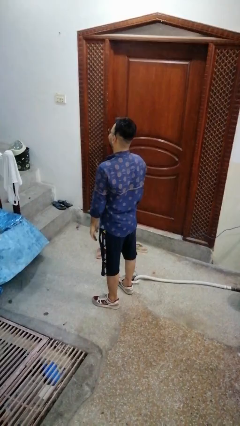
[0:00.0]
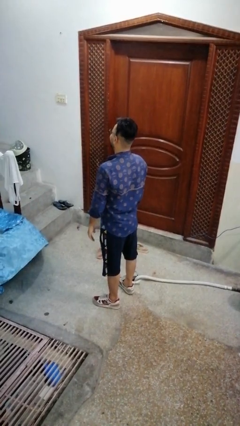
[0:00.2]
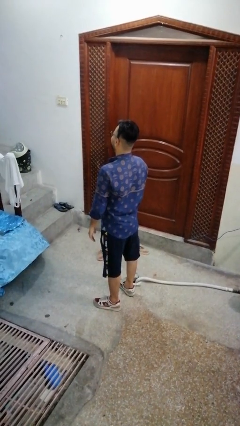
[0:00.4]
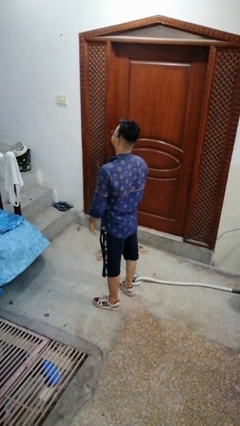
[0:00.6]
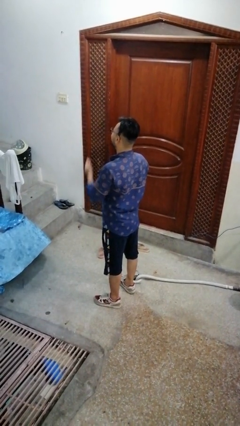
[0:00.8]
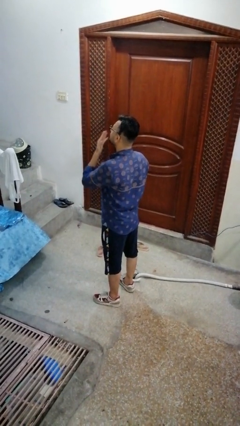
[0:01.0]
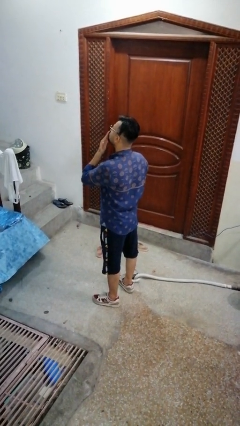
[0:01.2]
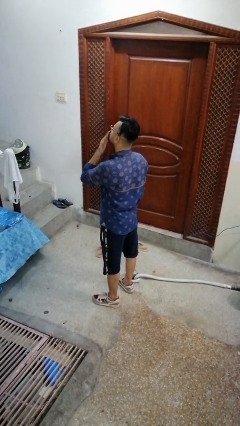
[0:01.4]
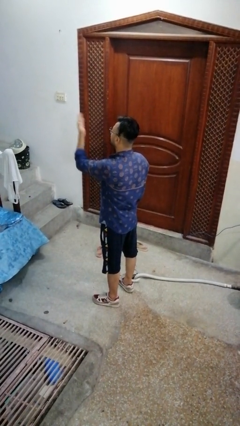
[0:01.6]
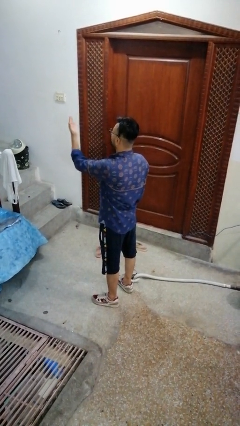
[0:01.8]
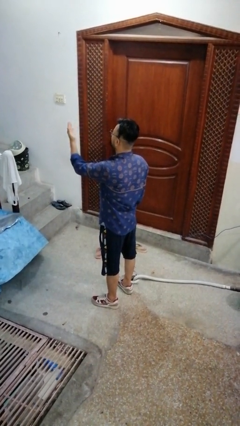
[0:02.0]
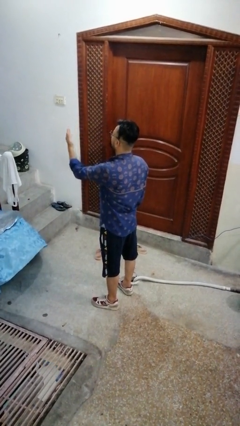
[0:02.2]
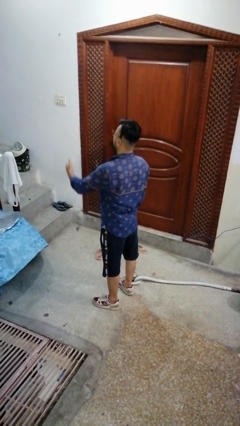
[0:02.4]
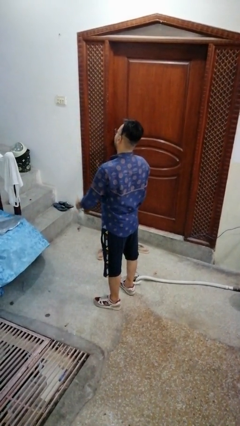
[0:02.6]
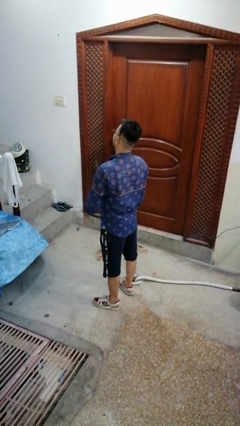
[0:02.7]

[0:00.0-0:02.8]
person gestures blow kiss

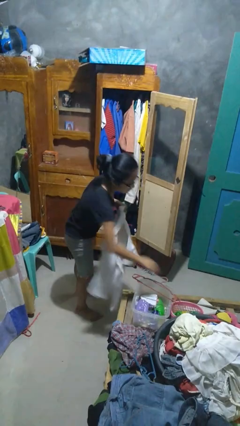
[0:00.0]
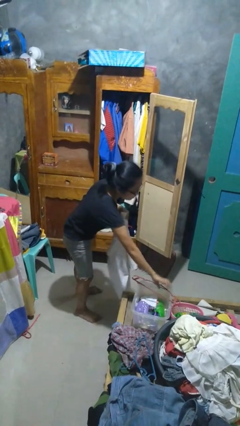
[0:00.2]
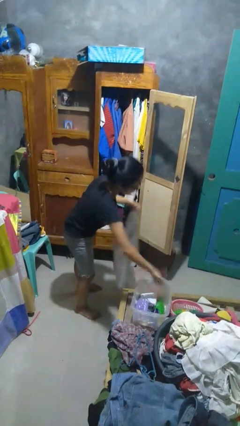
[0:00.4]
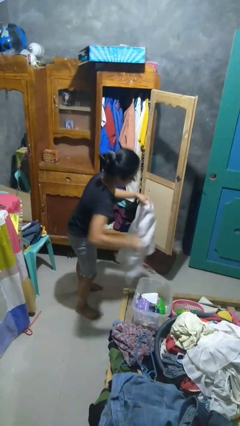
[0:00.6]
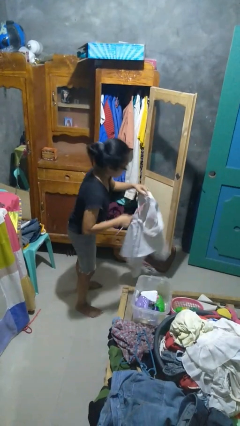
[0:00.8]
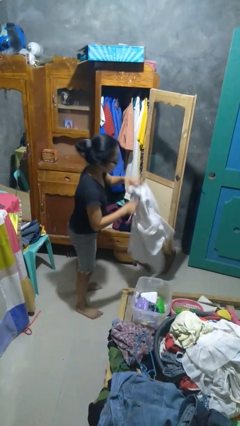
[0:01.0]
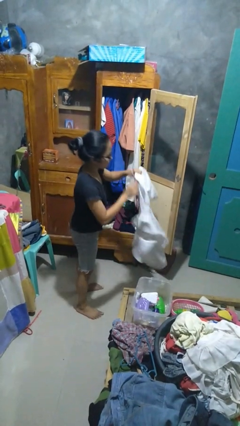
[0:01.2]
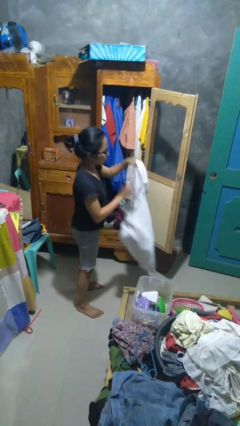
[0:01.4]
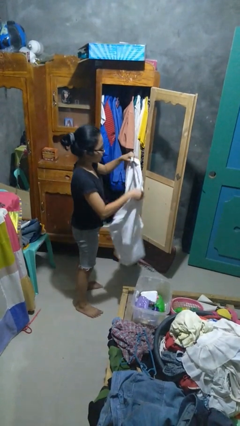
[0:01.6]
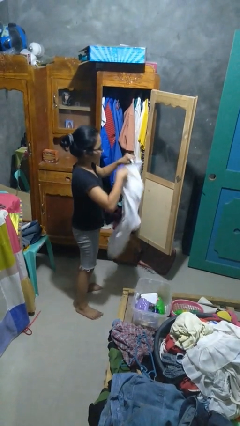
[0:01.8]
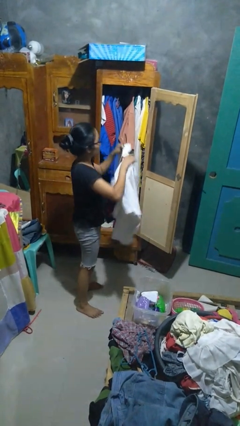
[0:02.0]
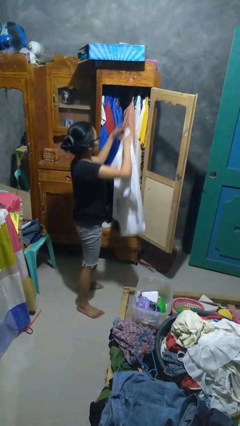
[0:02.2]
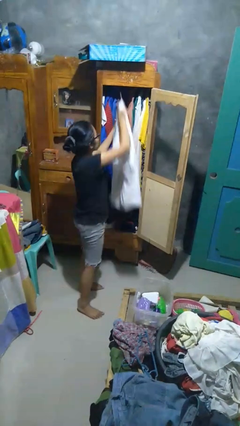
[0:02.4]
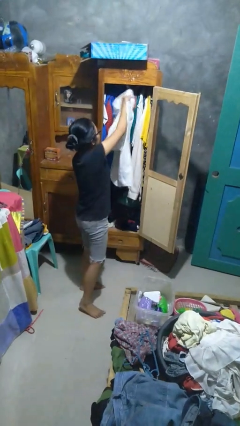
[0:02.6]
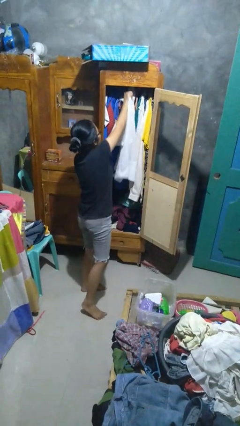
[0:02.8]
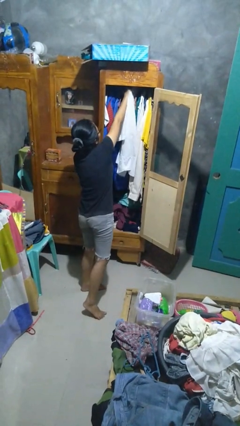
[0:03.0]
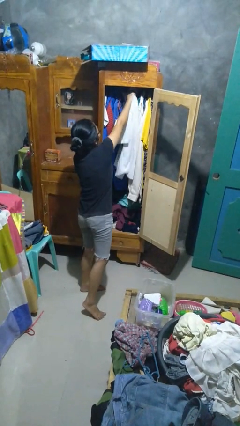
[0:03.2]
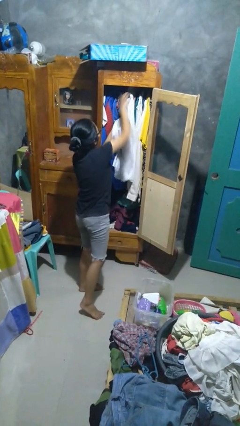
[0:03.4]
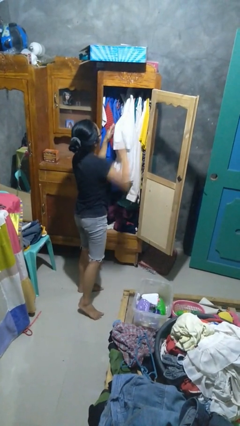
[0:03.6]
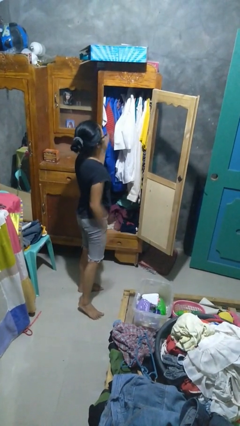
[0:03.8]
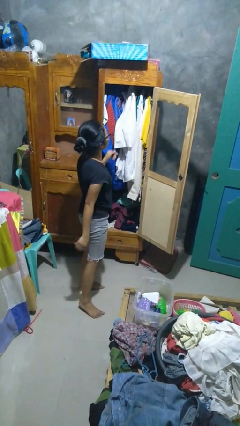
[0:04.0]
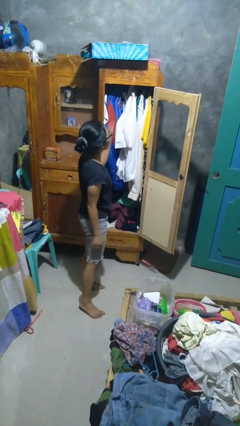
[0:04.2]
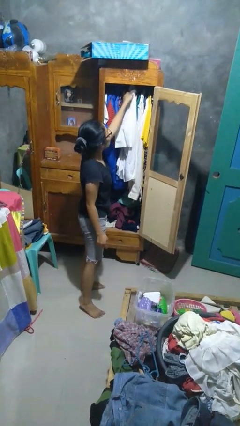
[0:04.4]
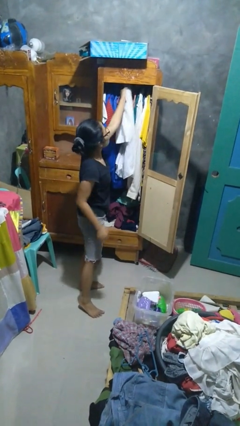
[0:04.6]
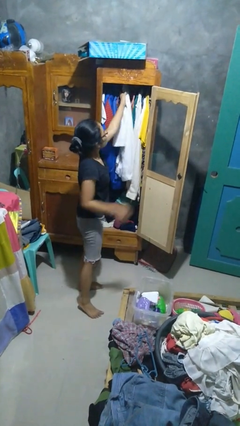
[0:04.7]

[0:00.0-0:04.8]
person puts clothes into closet

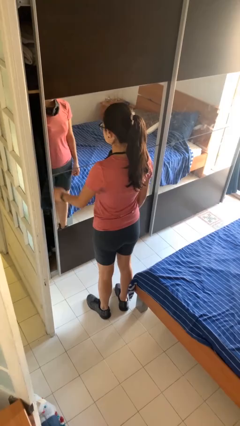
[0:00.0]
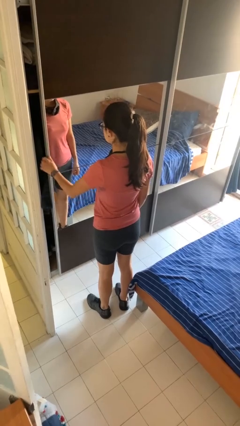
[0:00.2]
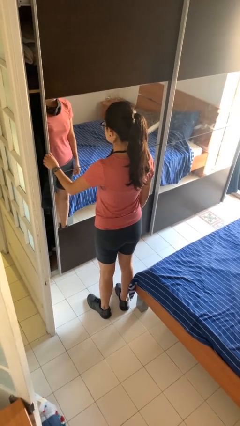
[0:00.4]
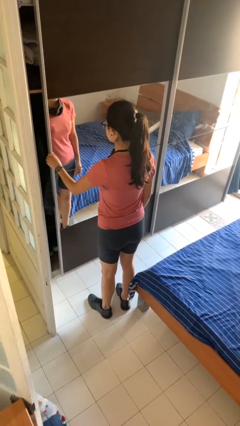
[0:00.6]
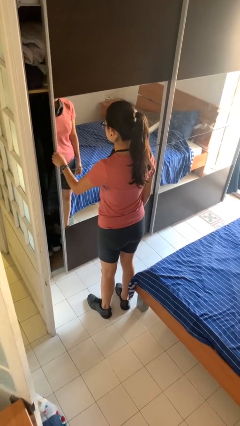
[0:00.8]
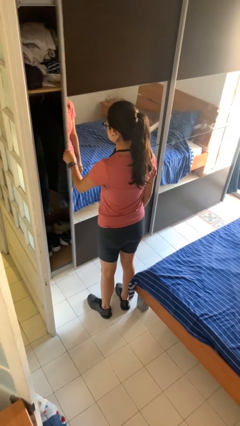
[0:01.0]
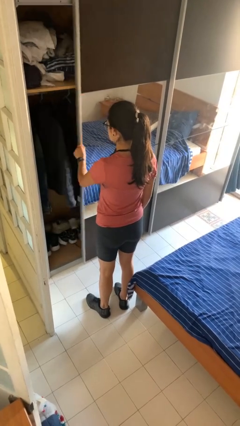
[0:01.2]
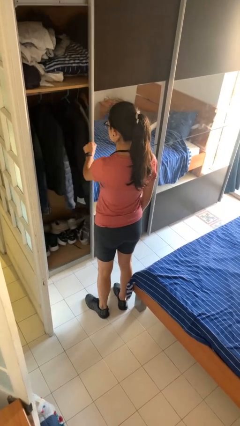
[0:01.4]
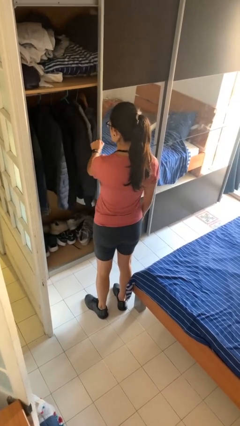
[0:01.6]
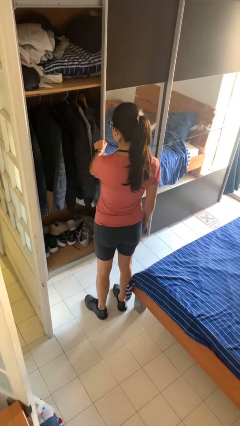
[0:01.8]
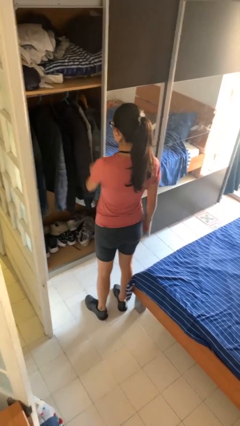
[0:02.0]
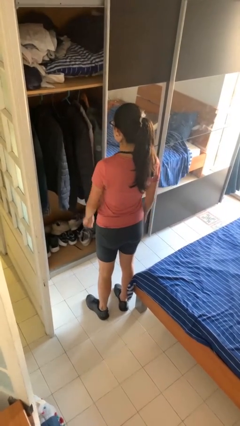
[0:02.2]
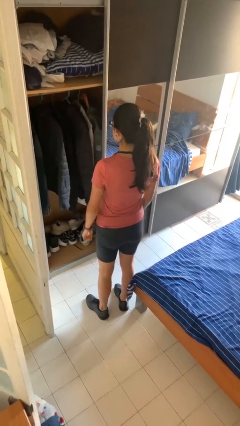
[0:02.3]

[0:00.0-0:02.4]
person opens dresser drawer

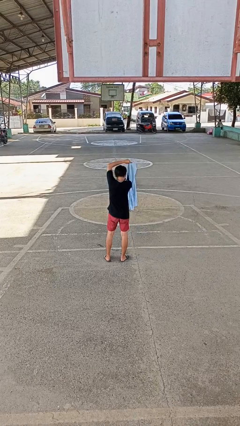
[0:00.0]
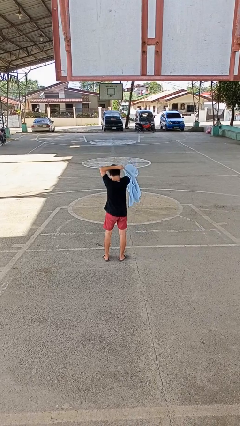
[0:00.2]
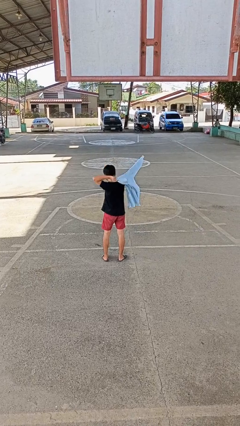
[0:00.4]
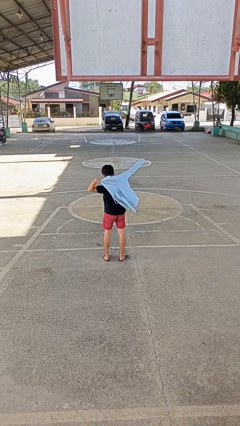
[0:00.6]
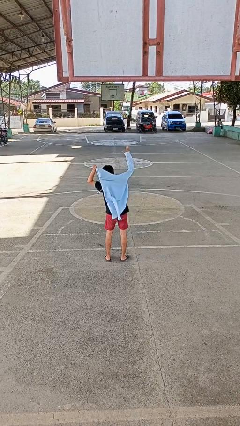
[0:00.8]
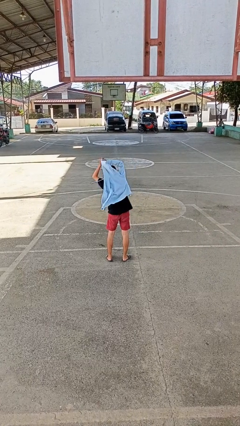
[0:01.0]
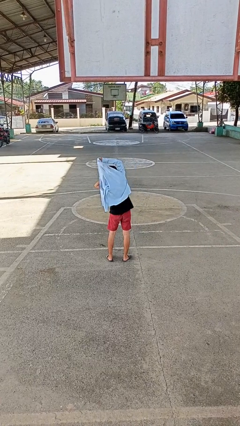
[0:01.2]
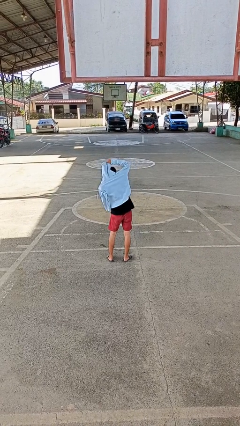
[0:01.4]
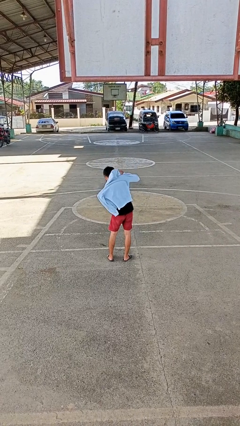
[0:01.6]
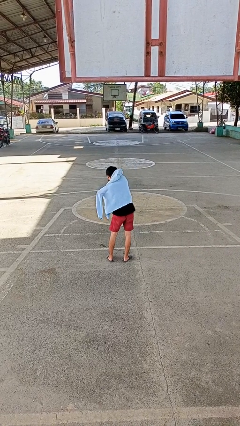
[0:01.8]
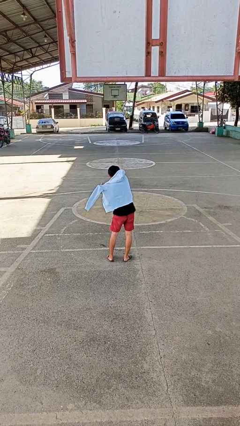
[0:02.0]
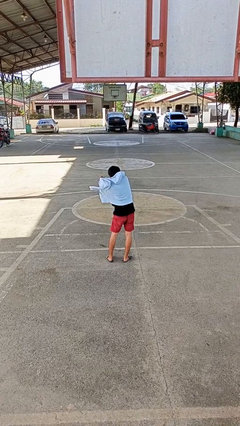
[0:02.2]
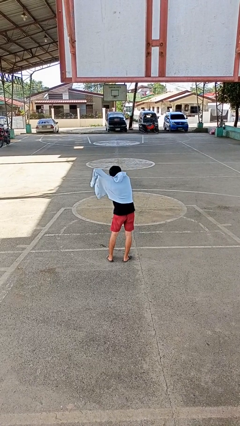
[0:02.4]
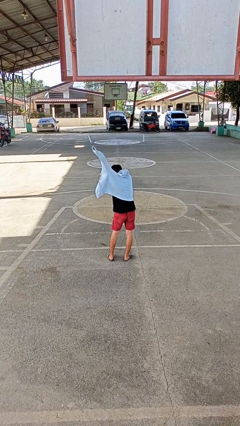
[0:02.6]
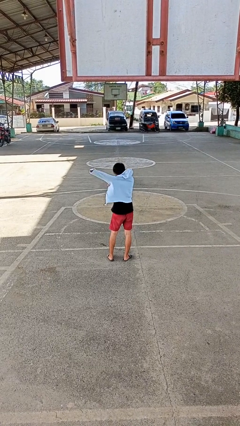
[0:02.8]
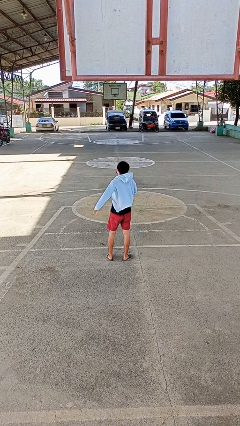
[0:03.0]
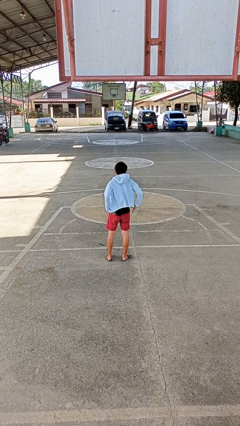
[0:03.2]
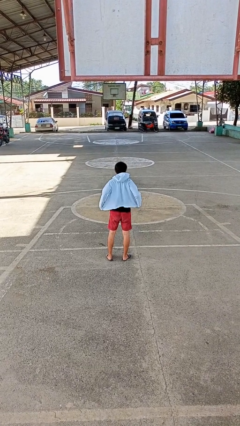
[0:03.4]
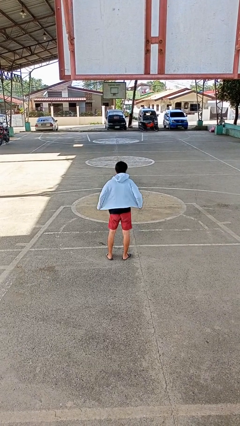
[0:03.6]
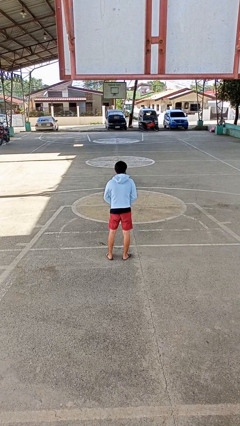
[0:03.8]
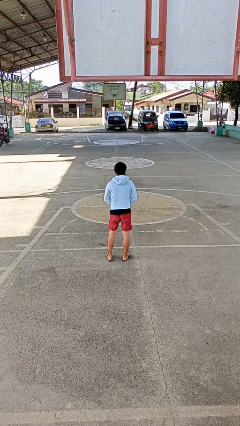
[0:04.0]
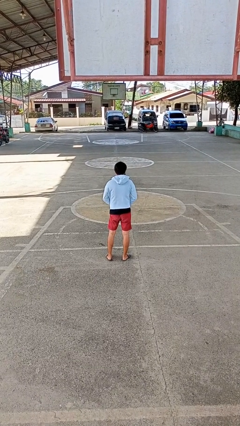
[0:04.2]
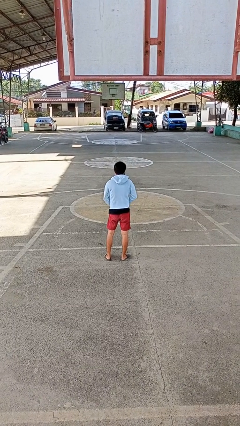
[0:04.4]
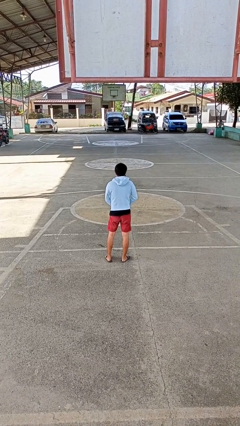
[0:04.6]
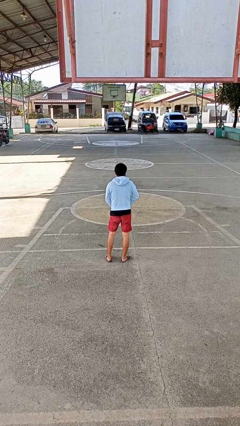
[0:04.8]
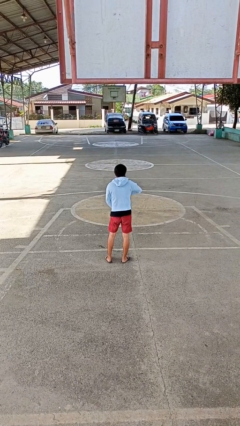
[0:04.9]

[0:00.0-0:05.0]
person puts on jacket

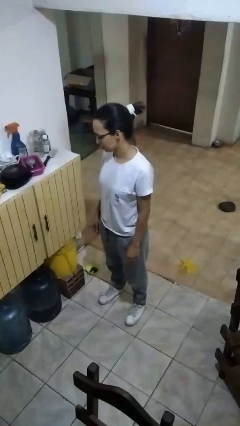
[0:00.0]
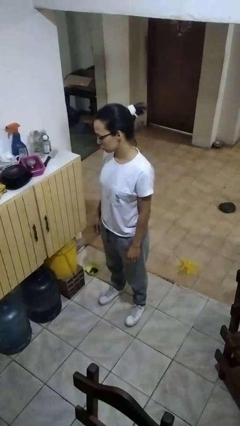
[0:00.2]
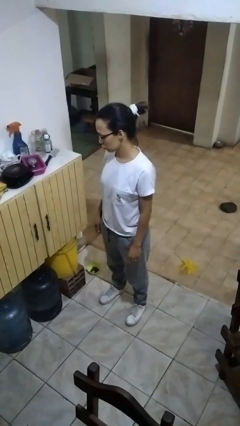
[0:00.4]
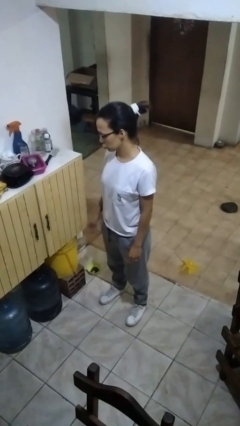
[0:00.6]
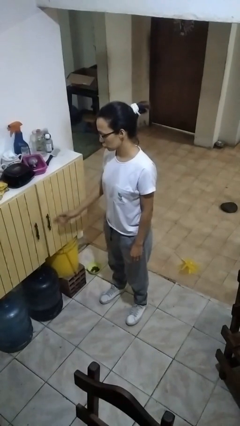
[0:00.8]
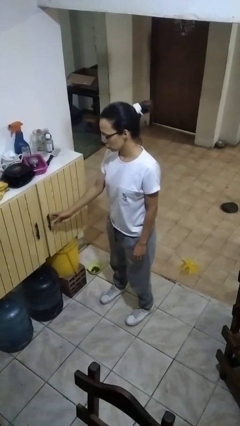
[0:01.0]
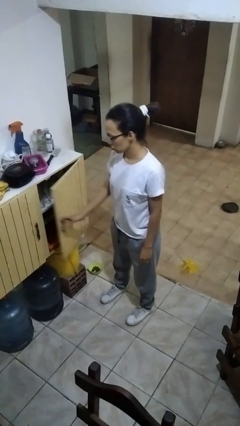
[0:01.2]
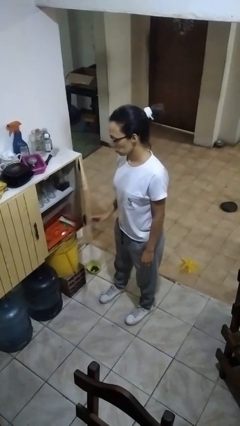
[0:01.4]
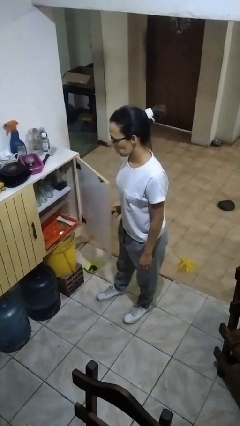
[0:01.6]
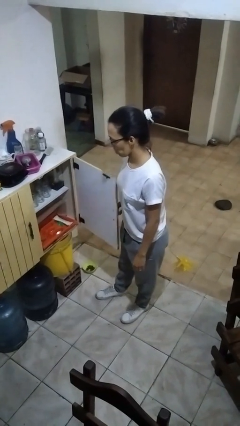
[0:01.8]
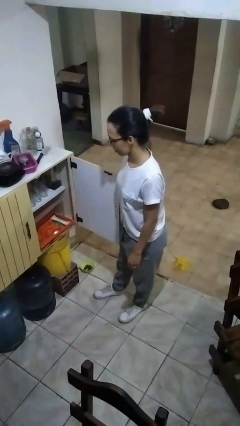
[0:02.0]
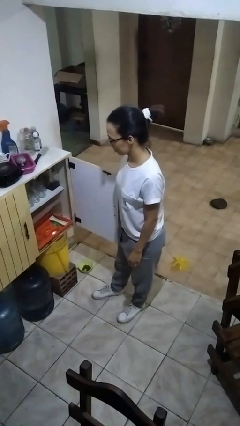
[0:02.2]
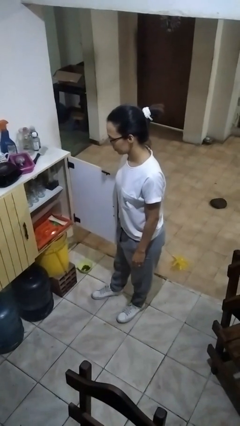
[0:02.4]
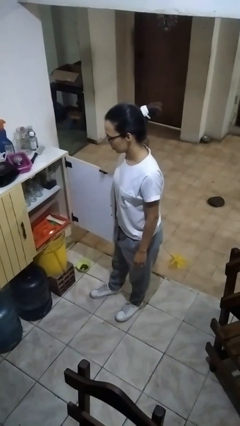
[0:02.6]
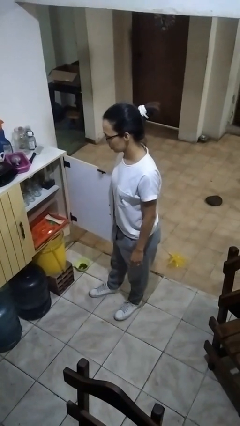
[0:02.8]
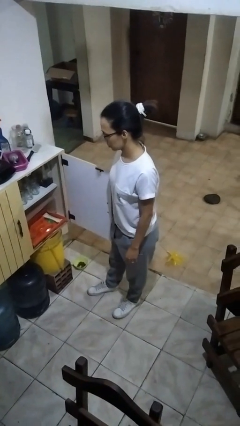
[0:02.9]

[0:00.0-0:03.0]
person opens kitchen drawer
